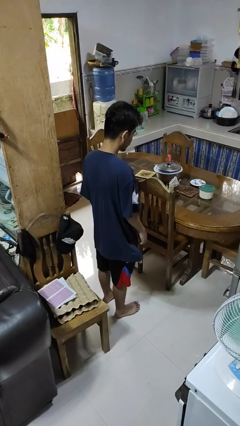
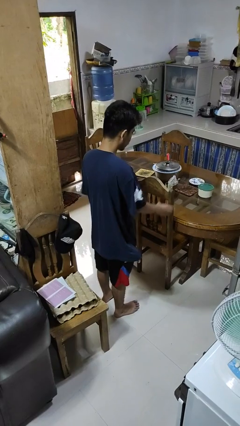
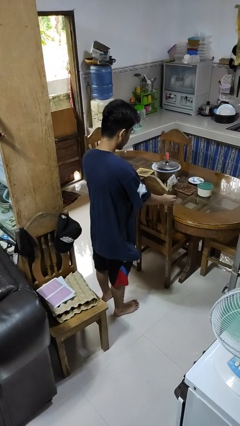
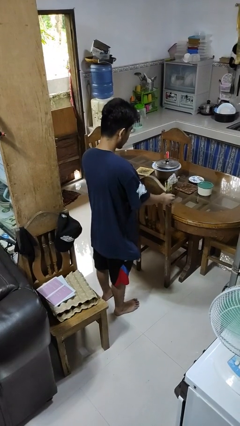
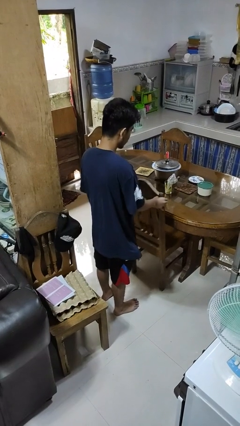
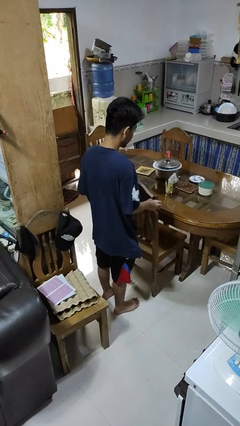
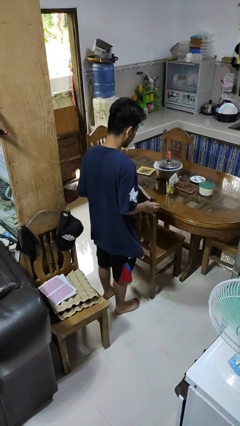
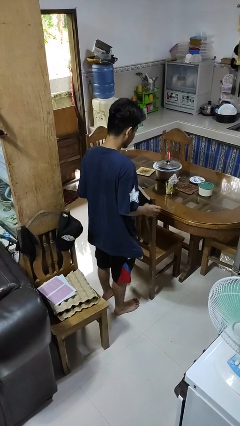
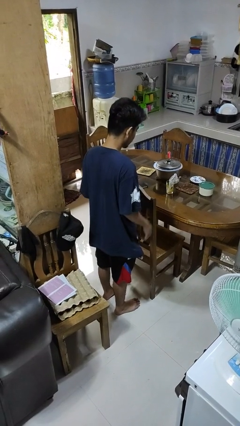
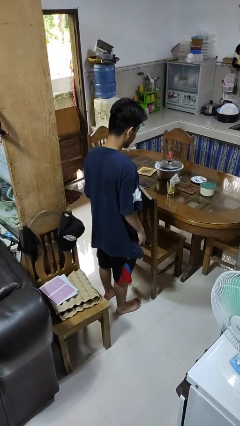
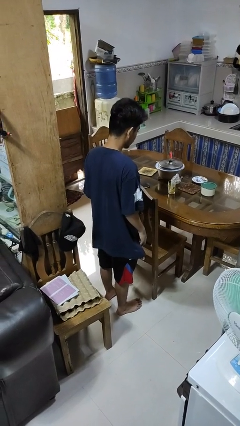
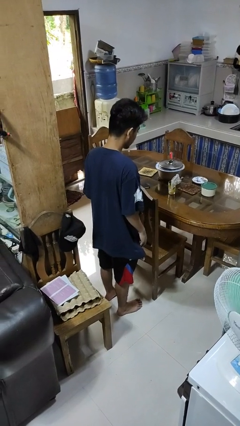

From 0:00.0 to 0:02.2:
person pulls out chair

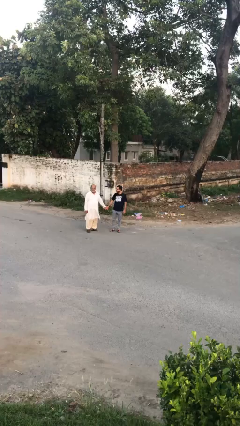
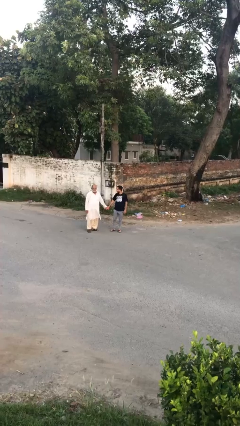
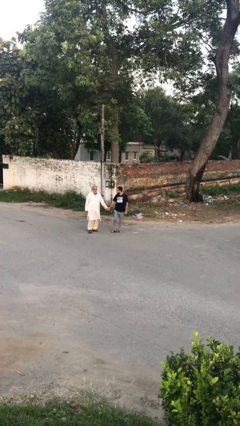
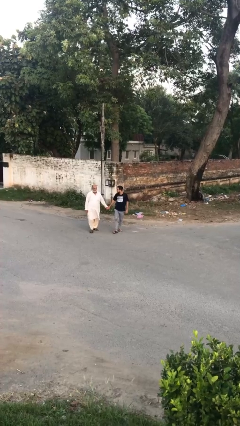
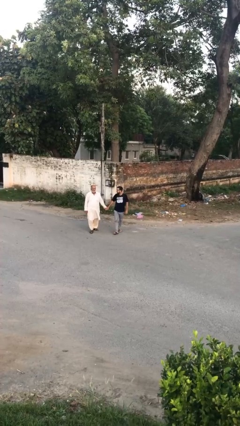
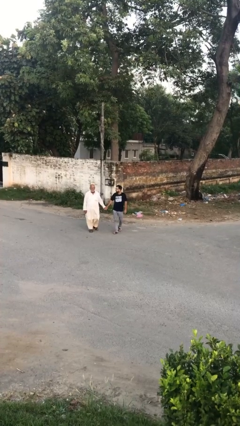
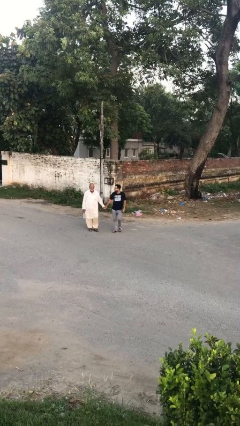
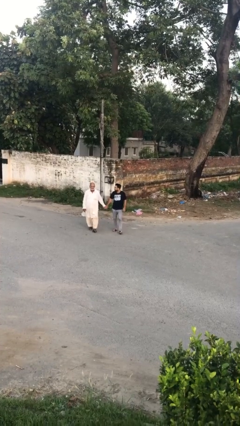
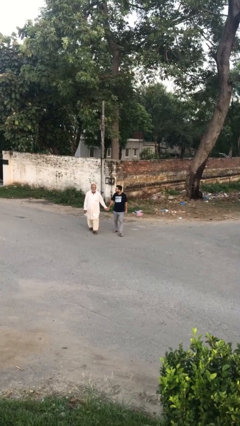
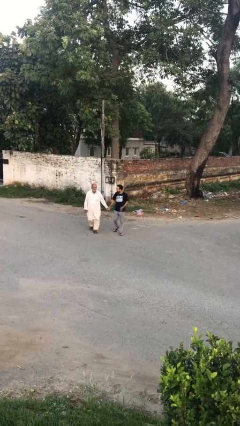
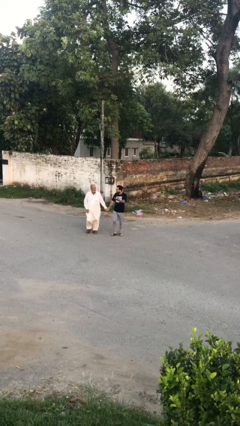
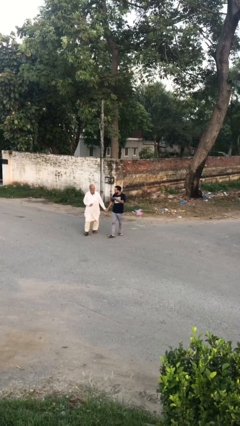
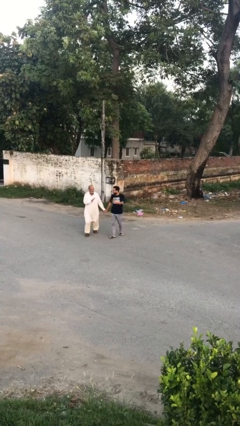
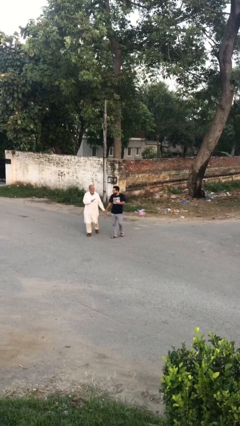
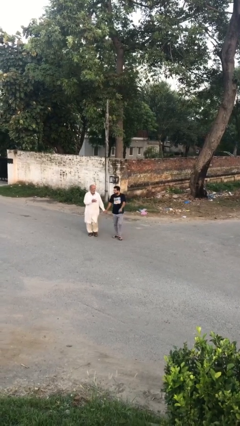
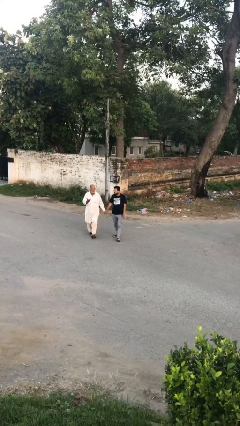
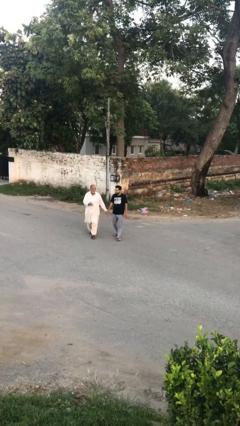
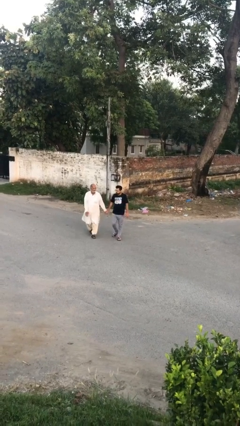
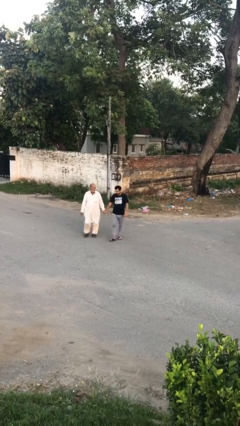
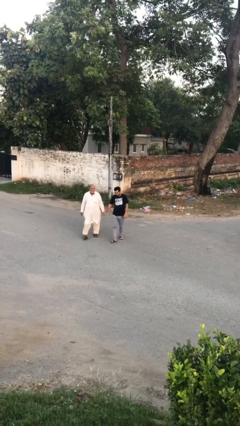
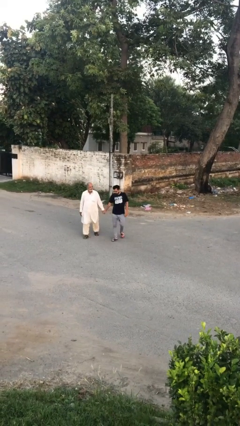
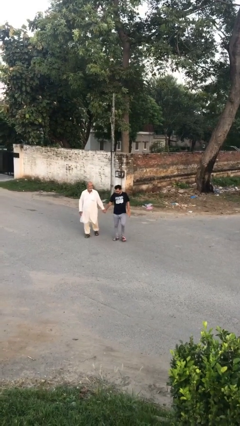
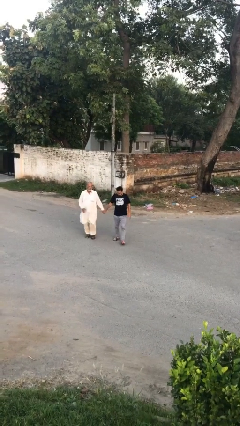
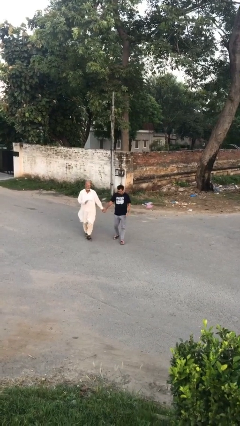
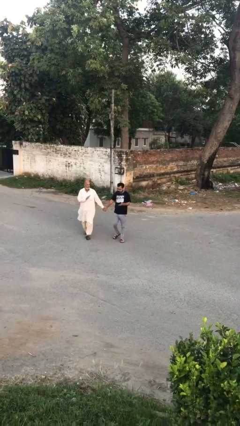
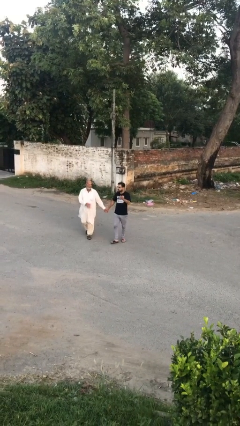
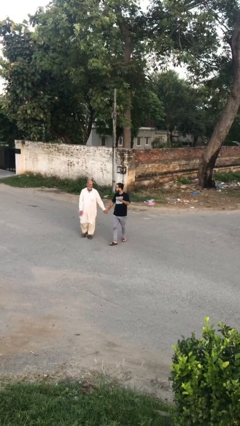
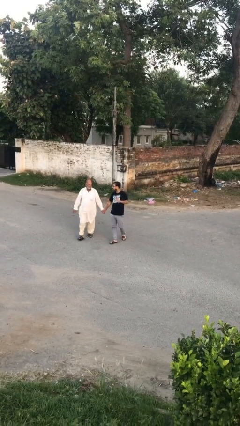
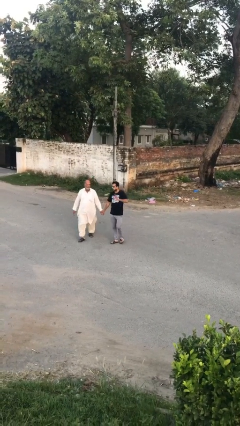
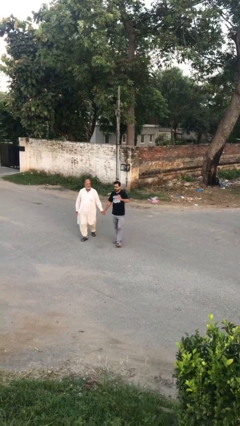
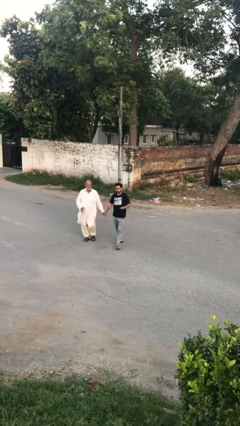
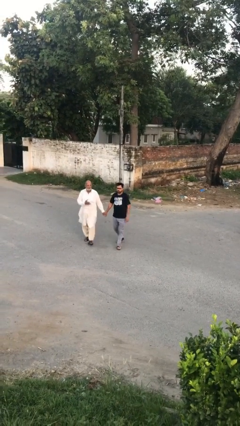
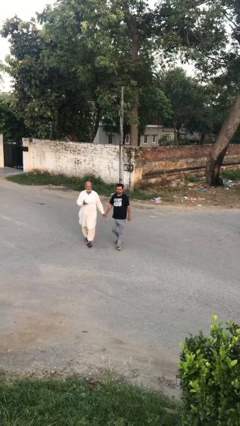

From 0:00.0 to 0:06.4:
person holds hand

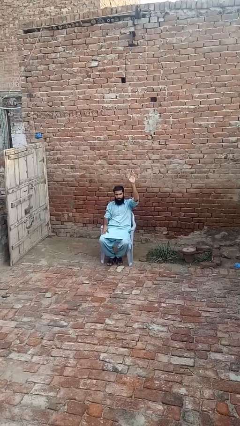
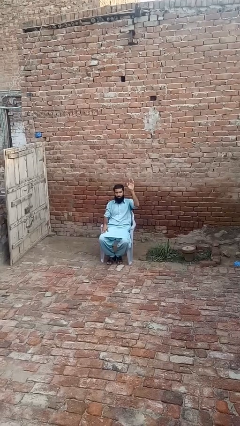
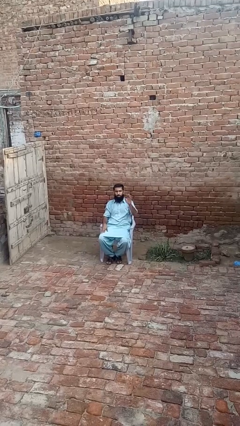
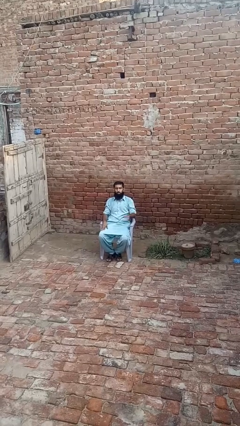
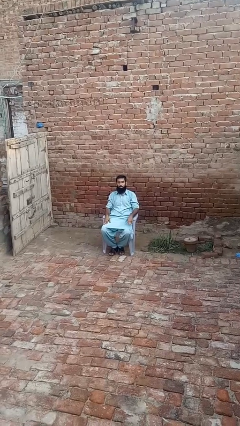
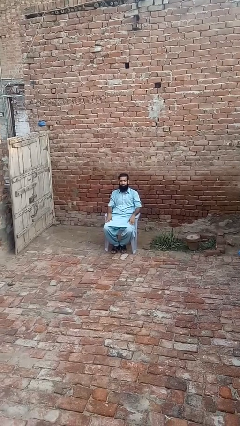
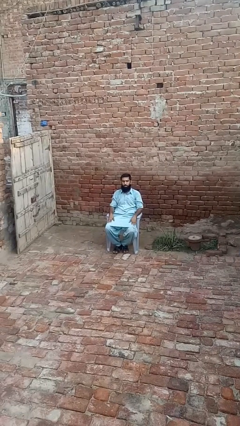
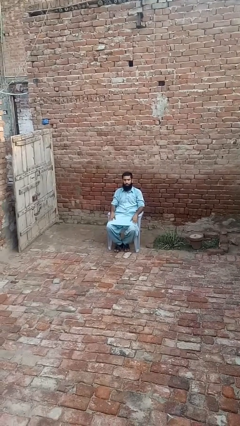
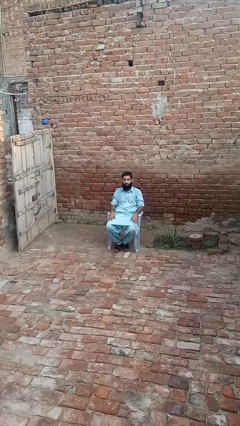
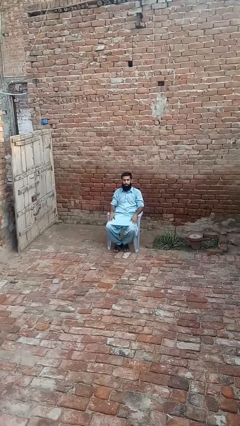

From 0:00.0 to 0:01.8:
person gestures lower hand

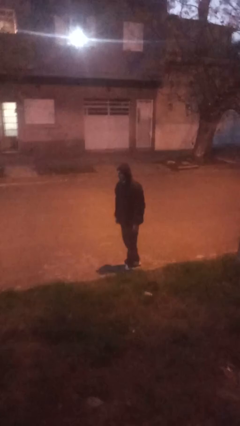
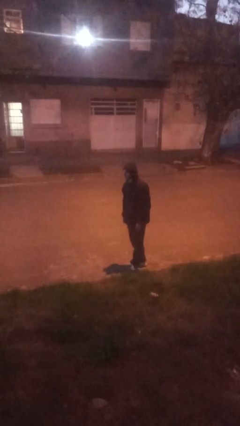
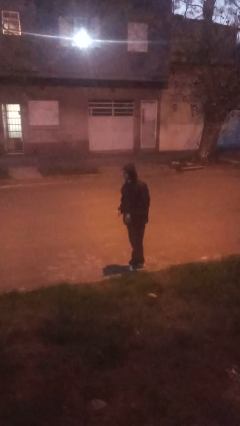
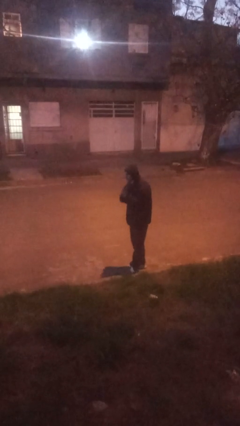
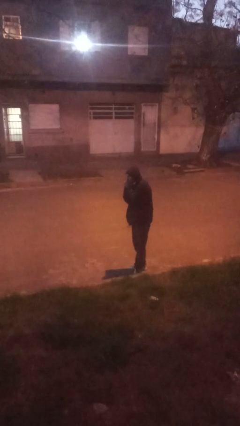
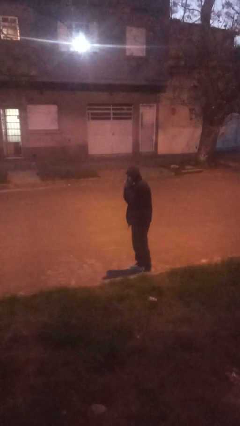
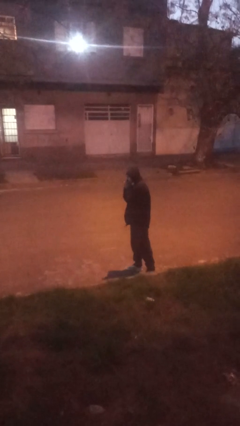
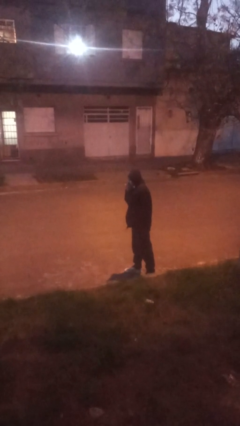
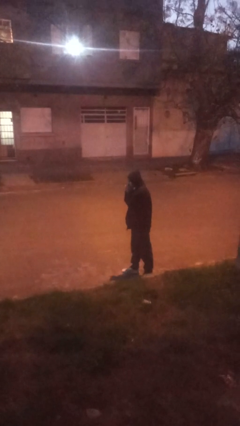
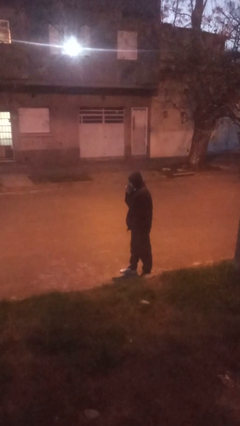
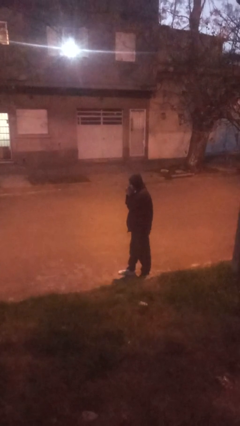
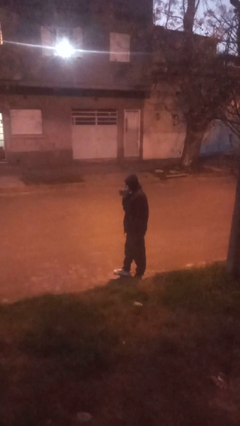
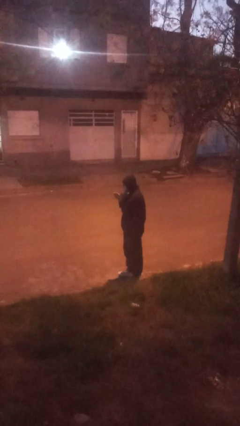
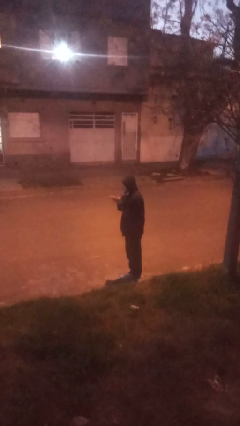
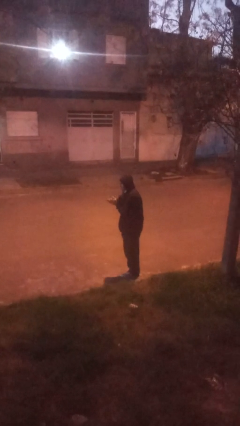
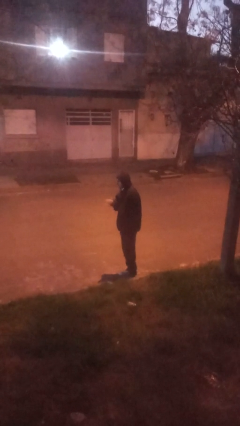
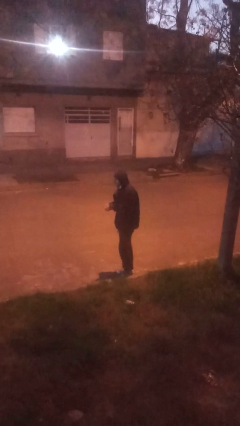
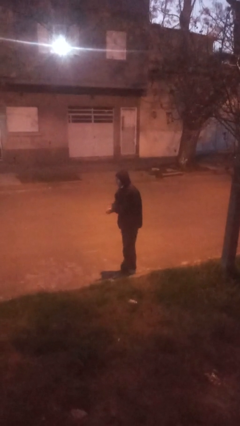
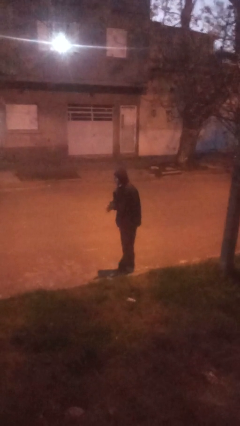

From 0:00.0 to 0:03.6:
person blows into hands

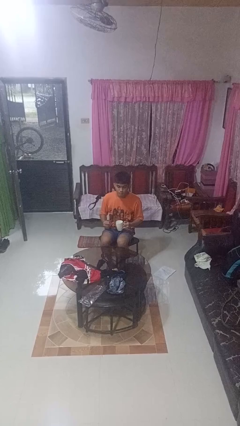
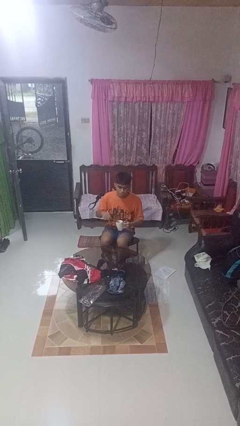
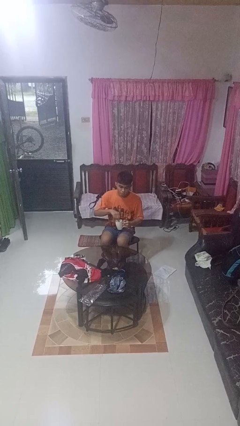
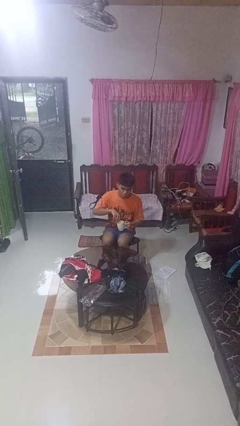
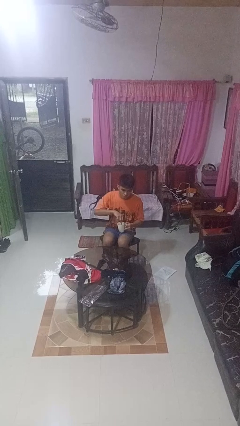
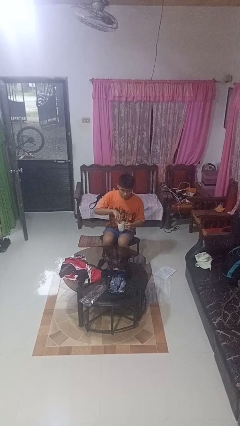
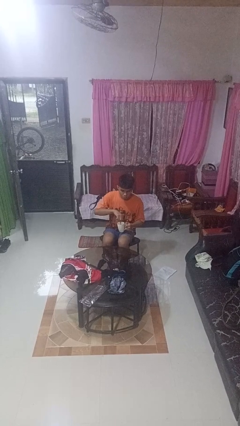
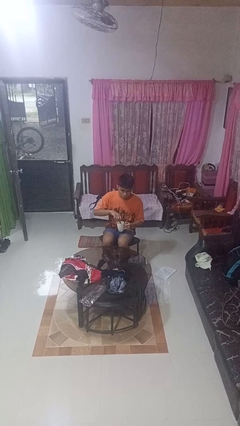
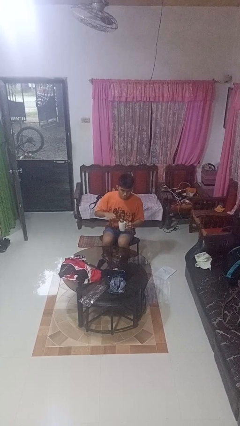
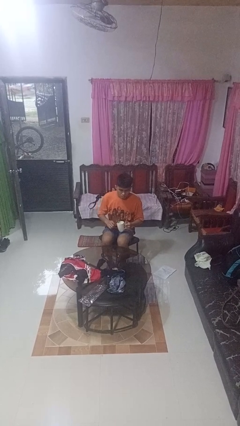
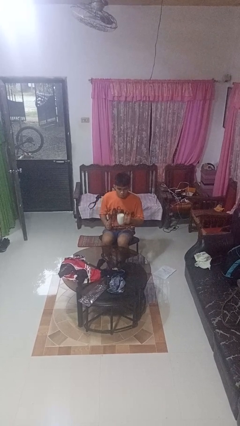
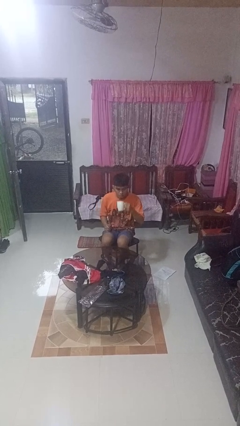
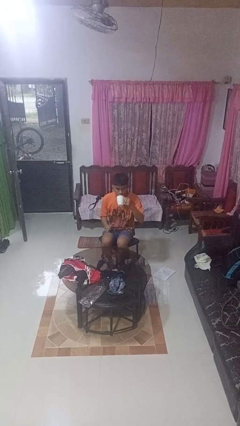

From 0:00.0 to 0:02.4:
person stirs mug

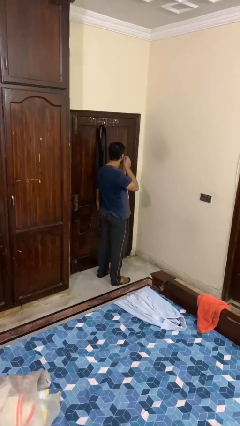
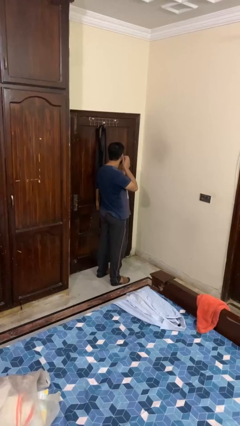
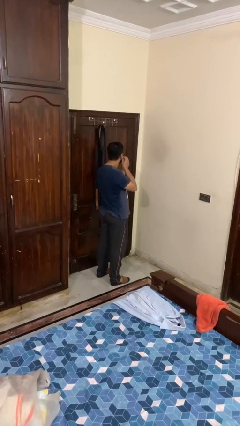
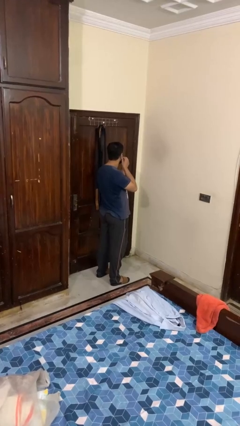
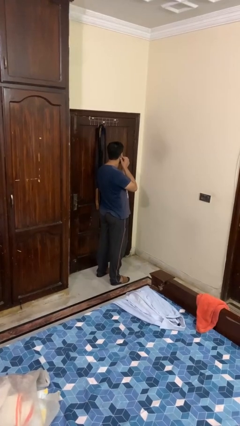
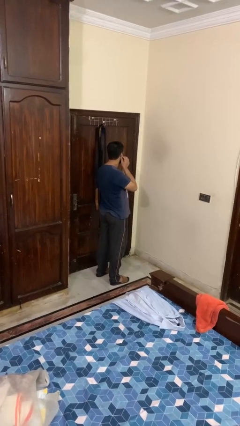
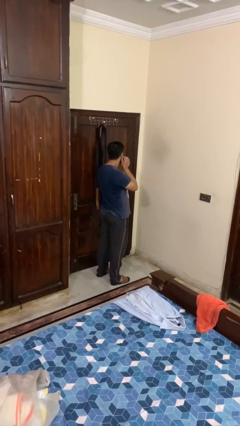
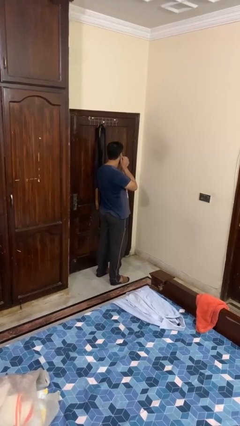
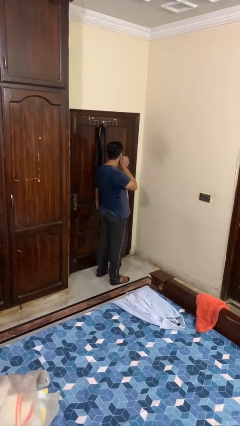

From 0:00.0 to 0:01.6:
person puts on earrings
